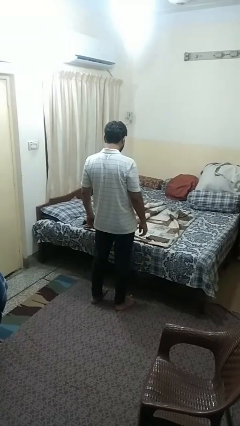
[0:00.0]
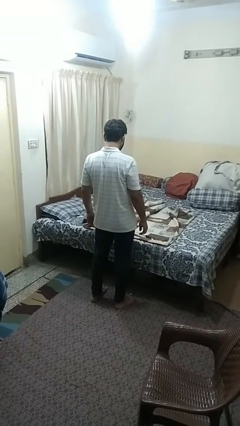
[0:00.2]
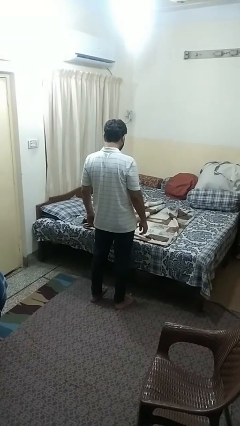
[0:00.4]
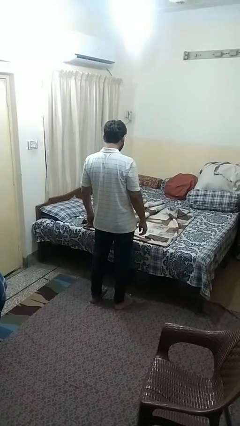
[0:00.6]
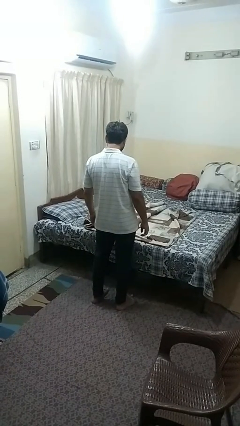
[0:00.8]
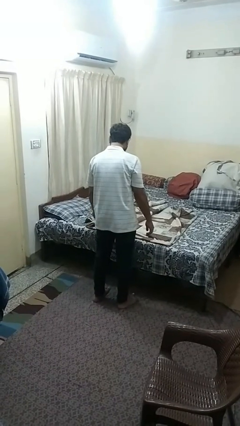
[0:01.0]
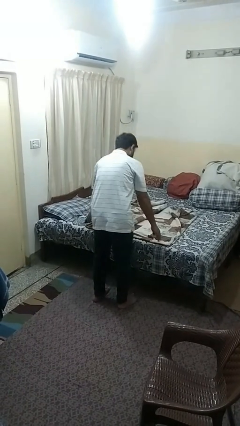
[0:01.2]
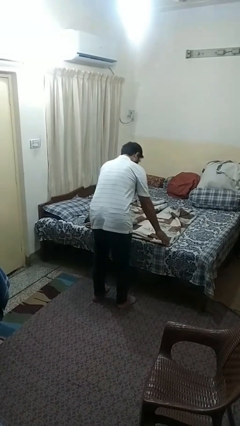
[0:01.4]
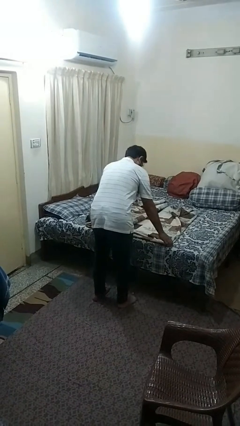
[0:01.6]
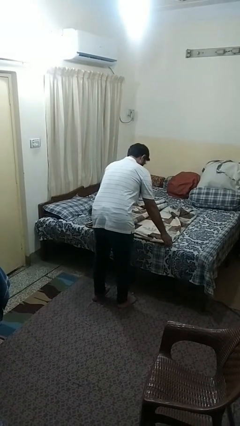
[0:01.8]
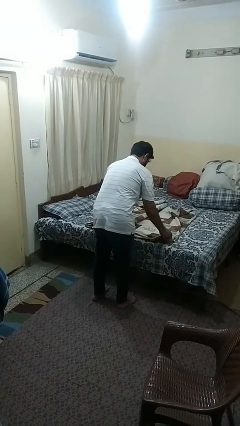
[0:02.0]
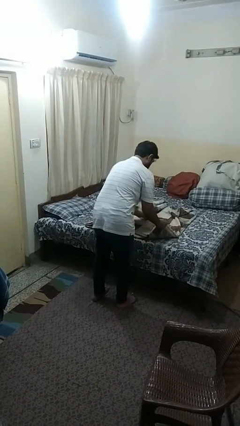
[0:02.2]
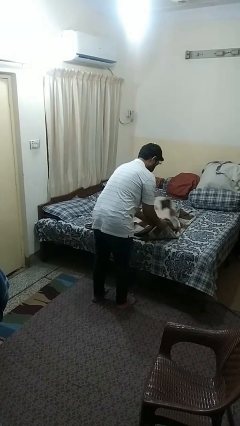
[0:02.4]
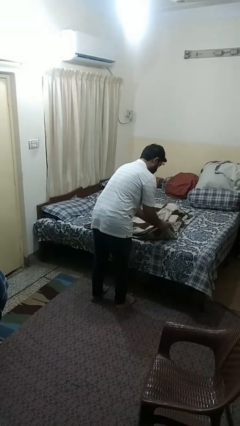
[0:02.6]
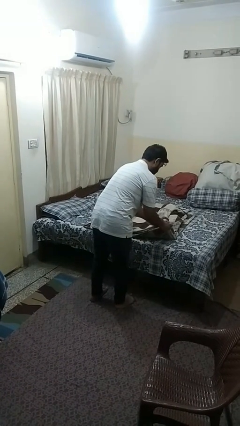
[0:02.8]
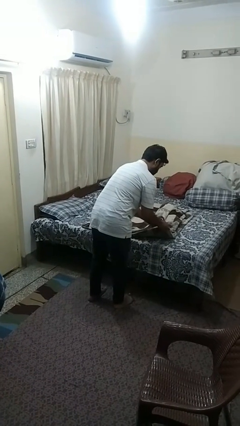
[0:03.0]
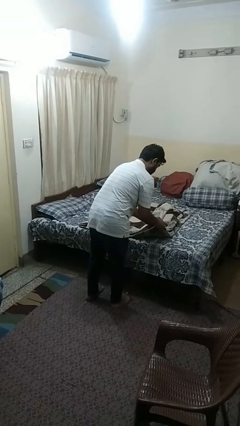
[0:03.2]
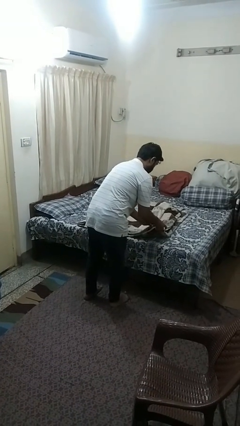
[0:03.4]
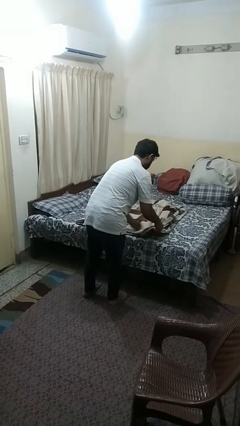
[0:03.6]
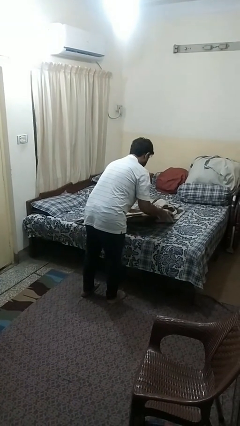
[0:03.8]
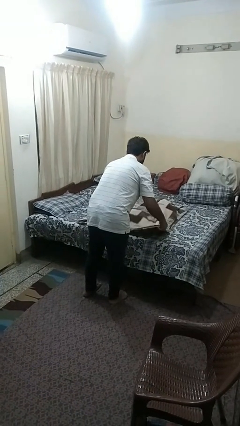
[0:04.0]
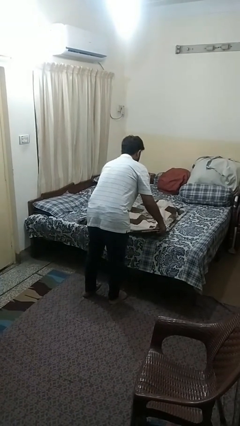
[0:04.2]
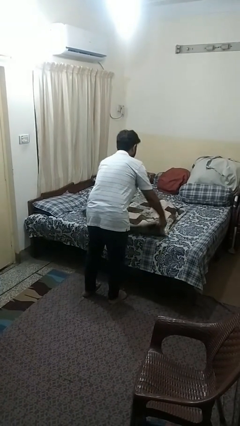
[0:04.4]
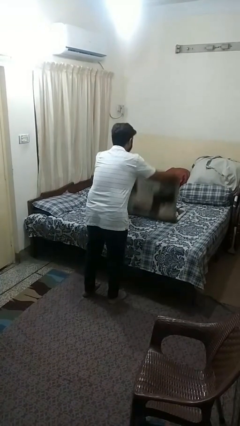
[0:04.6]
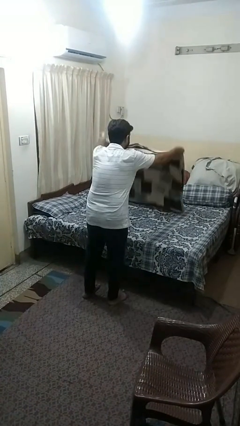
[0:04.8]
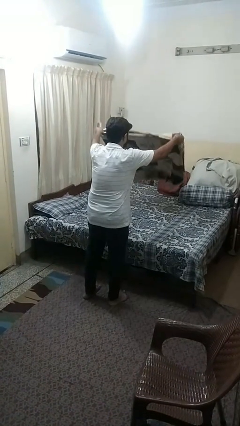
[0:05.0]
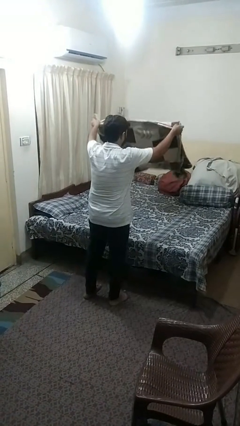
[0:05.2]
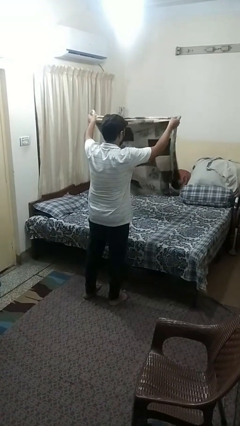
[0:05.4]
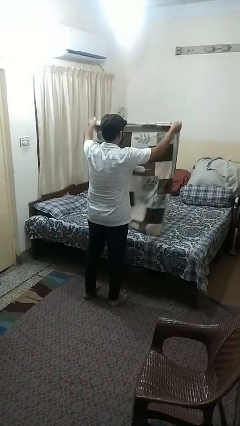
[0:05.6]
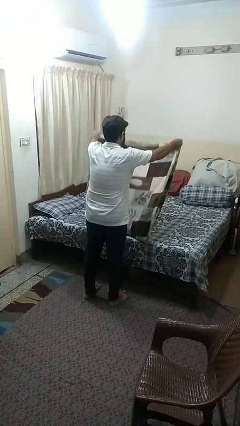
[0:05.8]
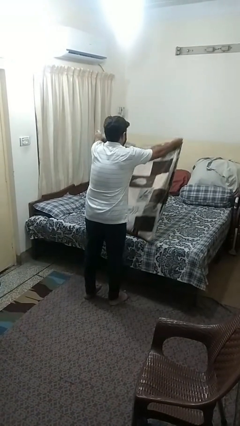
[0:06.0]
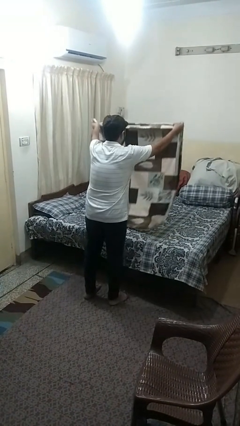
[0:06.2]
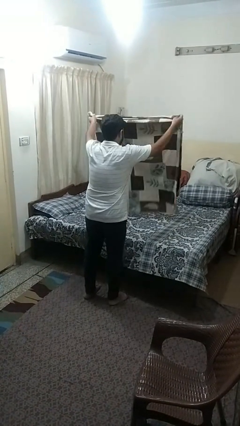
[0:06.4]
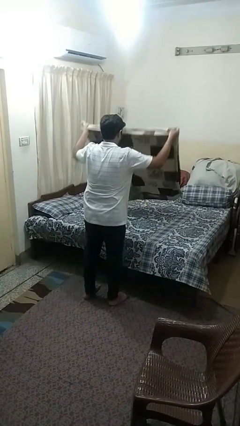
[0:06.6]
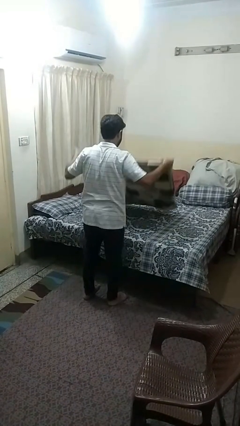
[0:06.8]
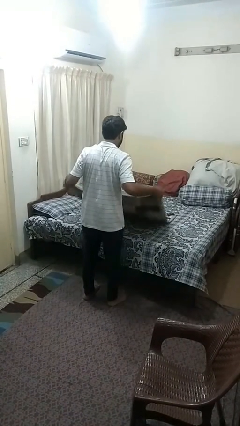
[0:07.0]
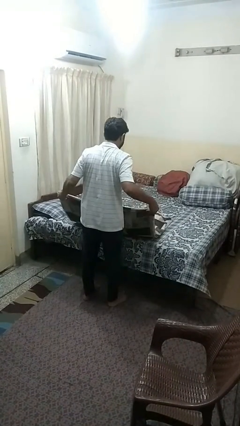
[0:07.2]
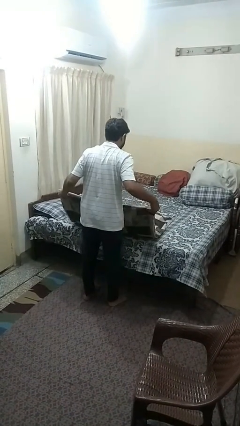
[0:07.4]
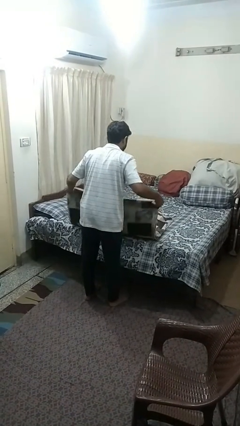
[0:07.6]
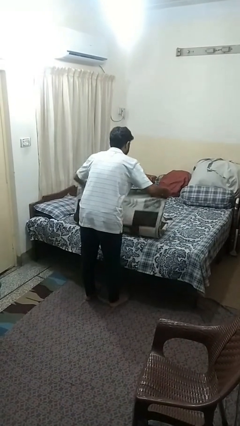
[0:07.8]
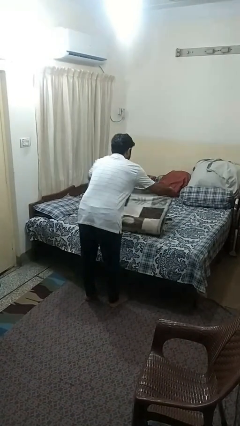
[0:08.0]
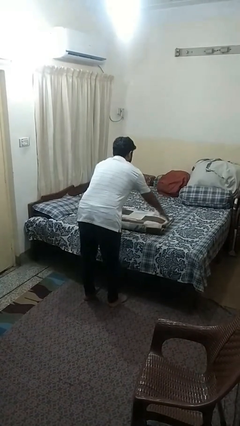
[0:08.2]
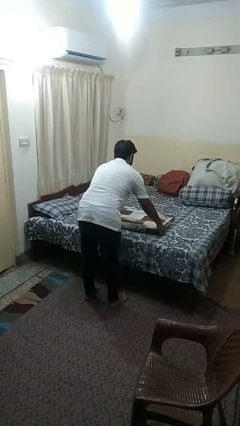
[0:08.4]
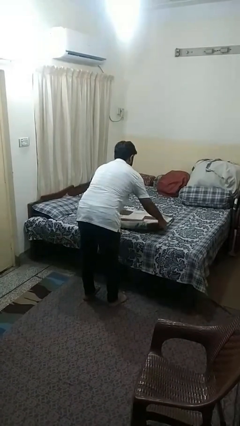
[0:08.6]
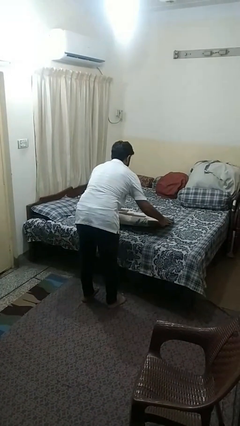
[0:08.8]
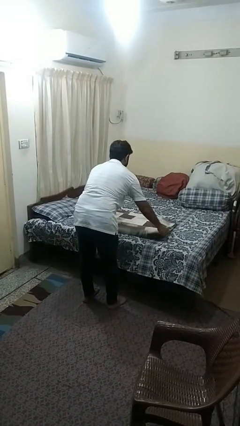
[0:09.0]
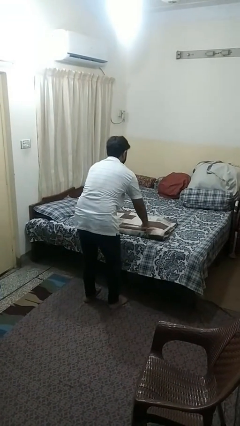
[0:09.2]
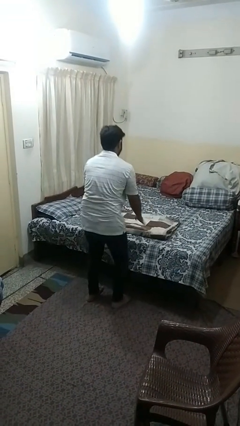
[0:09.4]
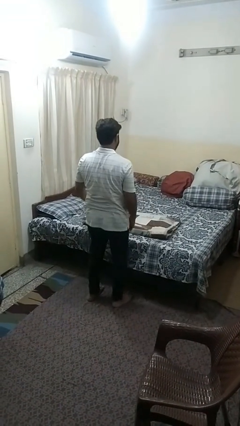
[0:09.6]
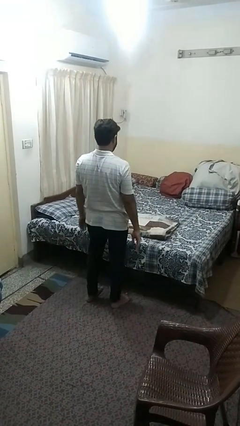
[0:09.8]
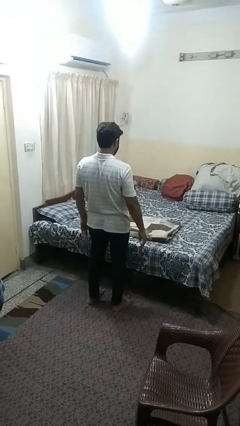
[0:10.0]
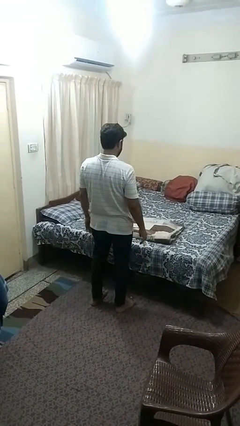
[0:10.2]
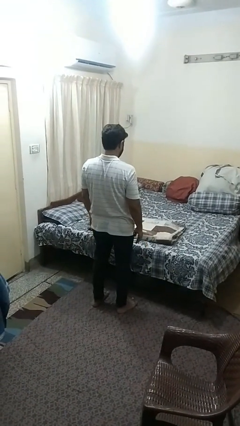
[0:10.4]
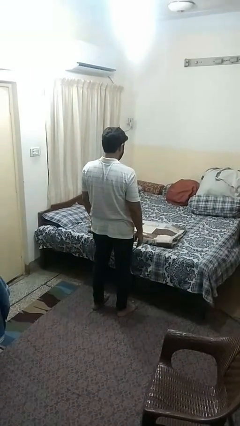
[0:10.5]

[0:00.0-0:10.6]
person folds blanket

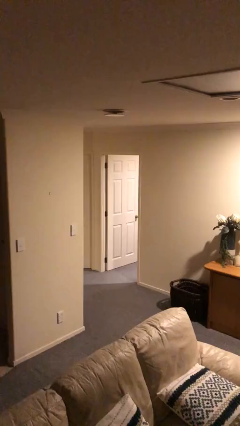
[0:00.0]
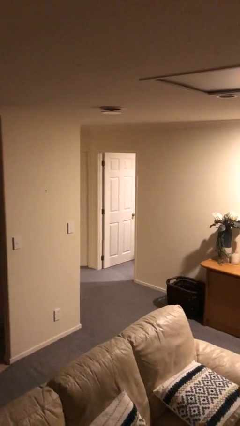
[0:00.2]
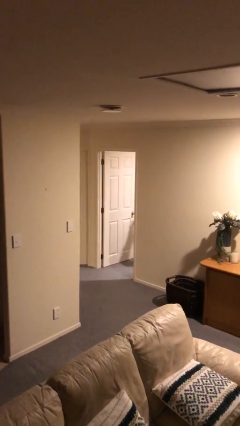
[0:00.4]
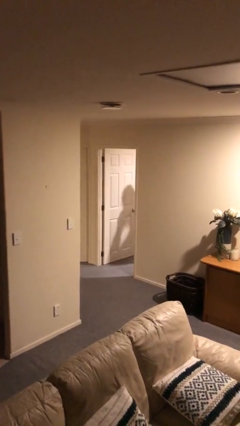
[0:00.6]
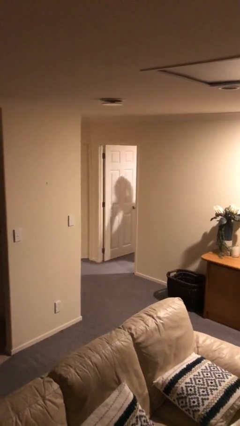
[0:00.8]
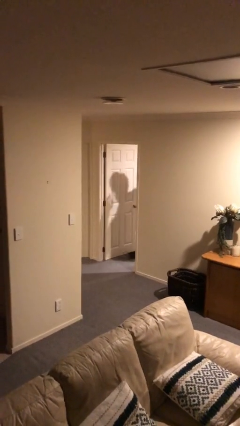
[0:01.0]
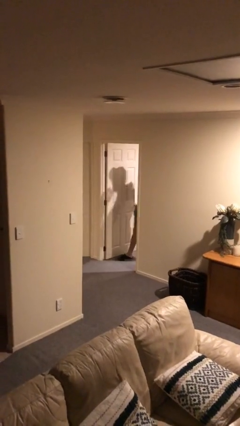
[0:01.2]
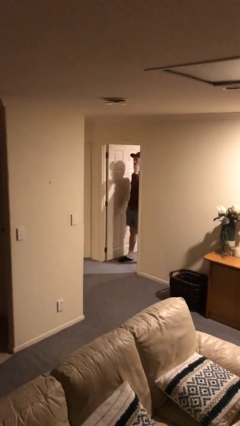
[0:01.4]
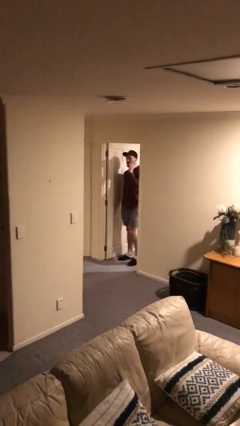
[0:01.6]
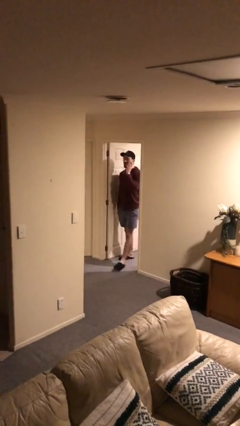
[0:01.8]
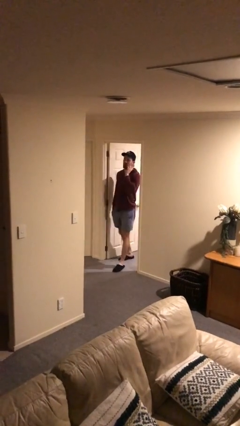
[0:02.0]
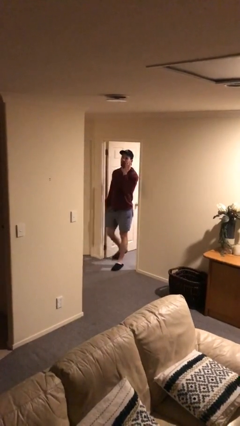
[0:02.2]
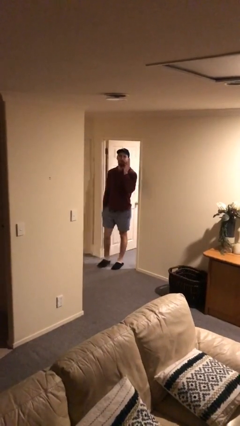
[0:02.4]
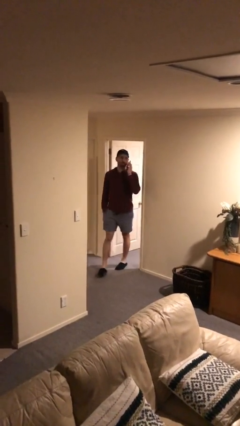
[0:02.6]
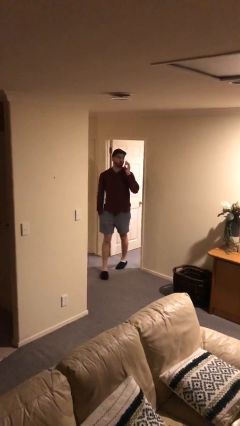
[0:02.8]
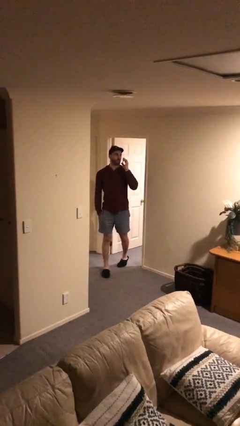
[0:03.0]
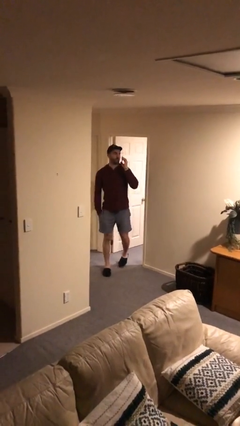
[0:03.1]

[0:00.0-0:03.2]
person enters scene through structure

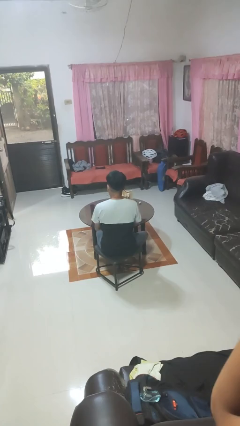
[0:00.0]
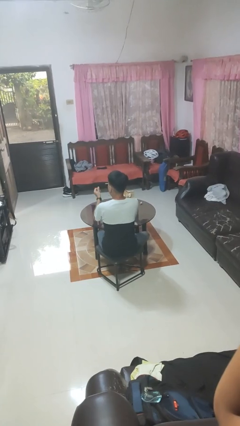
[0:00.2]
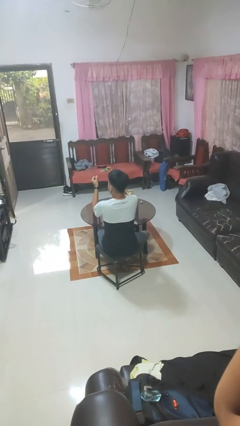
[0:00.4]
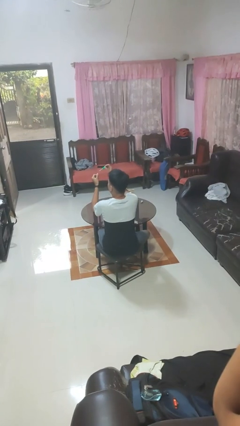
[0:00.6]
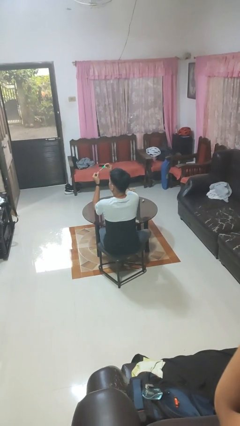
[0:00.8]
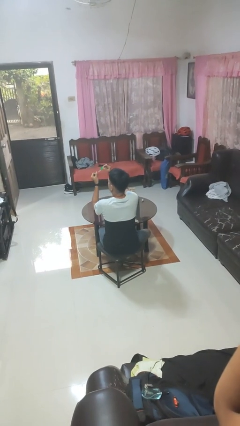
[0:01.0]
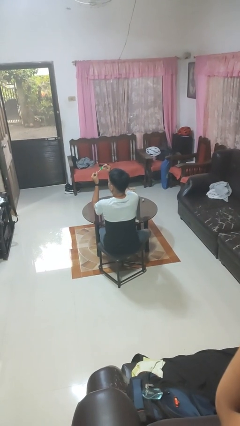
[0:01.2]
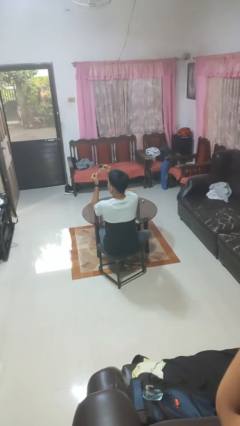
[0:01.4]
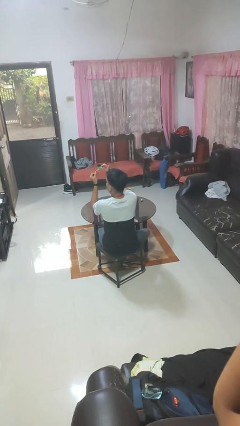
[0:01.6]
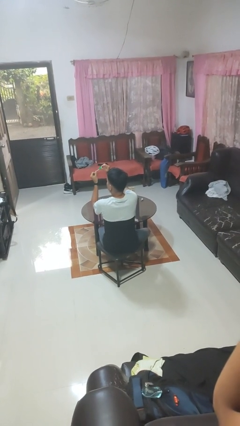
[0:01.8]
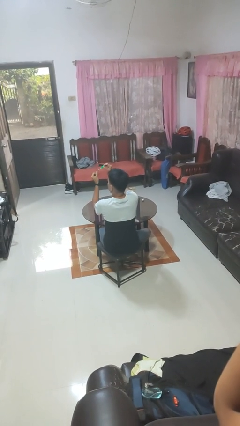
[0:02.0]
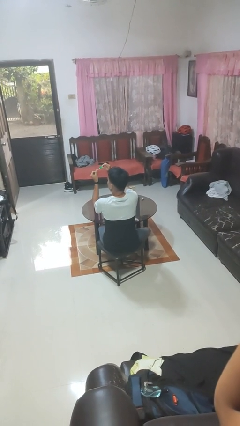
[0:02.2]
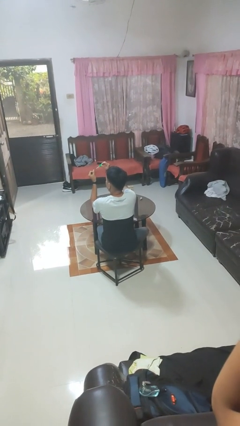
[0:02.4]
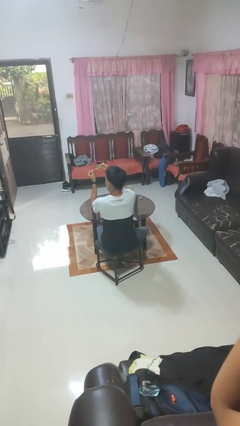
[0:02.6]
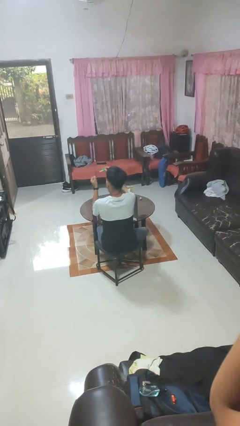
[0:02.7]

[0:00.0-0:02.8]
person paints fingernails

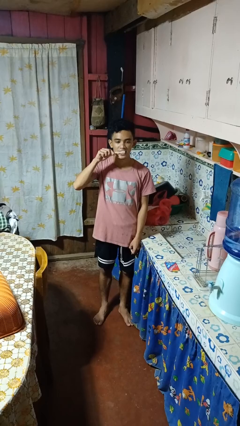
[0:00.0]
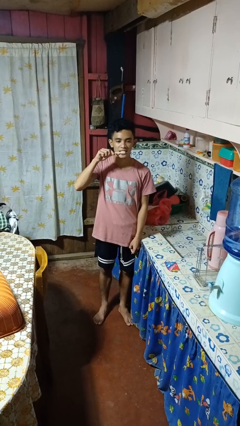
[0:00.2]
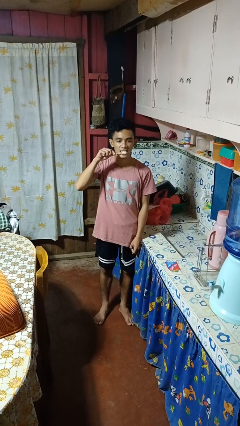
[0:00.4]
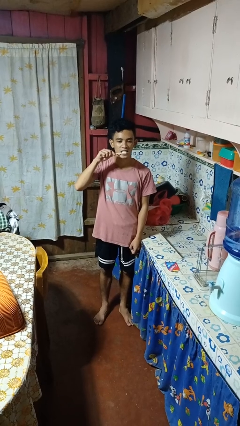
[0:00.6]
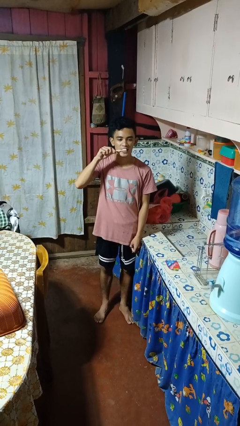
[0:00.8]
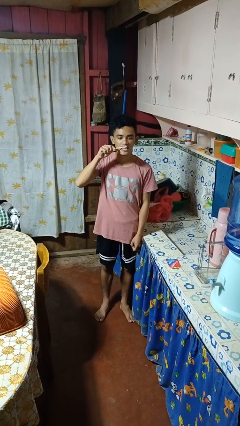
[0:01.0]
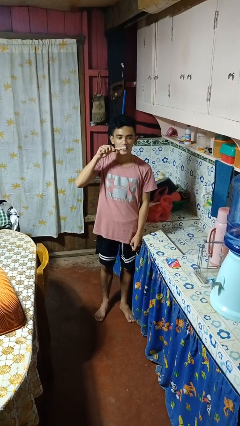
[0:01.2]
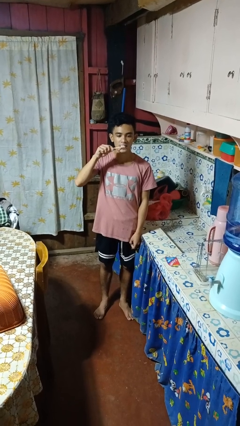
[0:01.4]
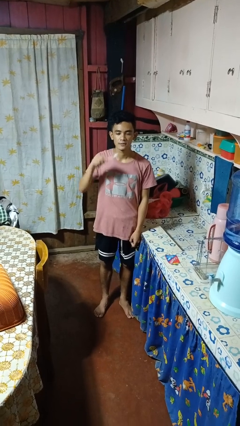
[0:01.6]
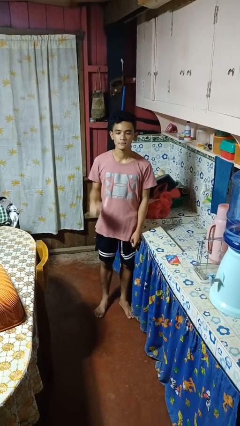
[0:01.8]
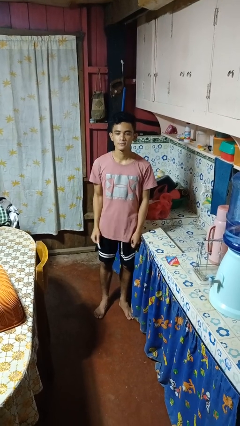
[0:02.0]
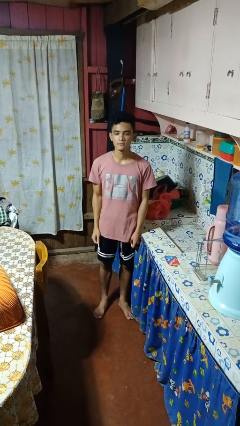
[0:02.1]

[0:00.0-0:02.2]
person brushes teeth
